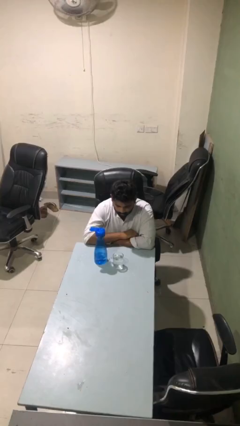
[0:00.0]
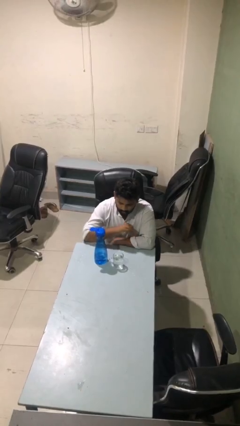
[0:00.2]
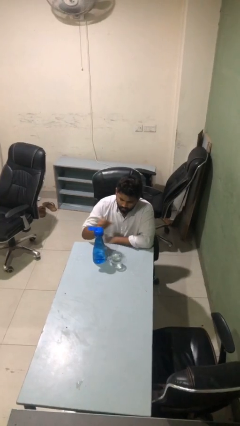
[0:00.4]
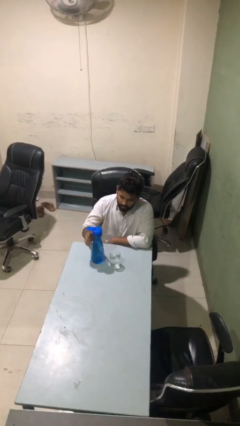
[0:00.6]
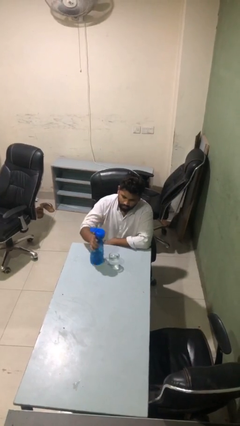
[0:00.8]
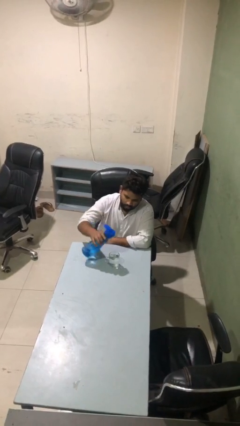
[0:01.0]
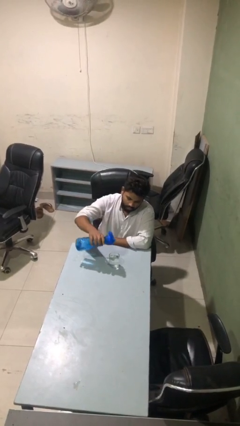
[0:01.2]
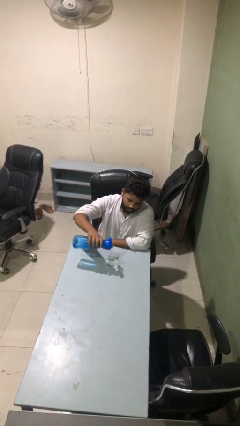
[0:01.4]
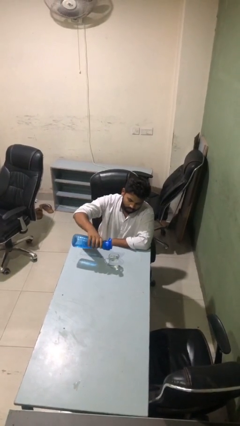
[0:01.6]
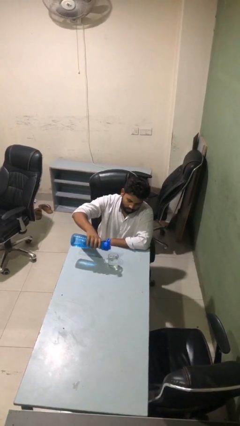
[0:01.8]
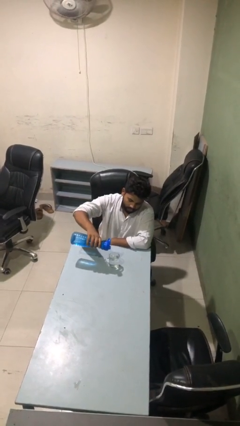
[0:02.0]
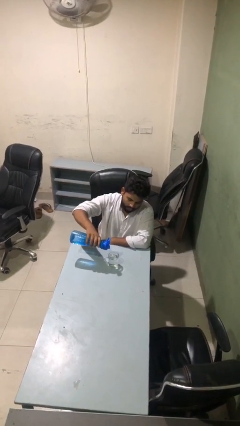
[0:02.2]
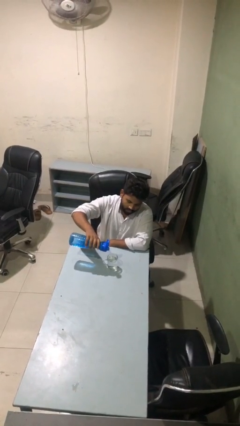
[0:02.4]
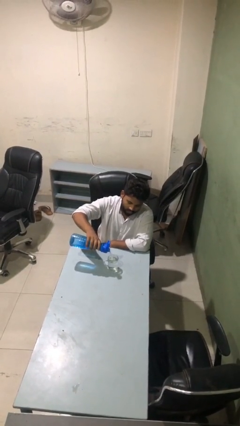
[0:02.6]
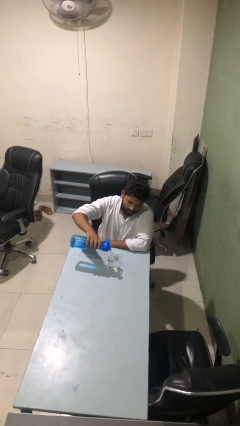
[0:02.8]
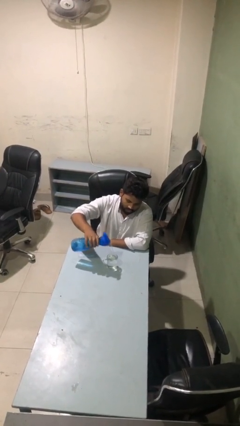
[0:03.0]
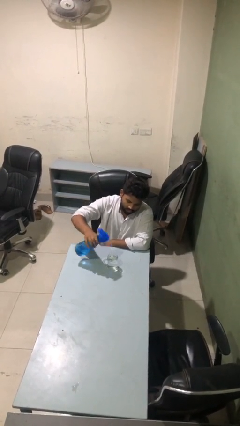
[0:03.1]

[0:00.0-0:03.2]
person pours liquid into cup

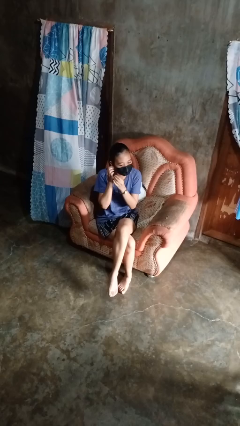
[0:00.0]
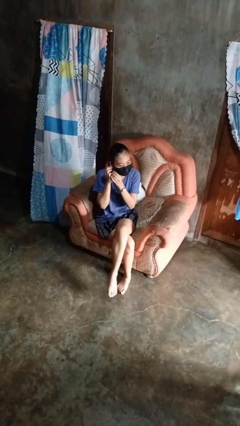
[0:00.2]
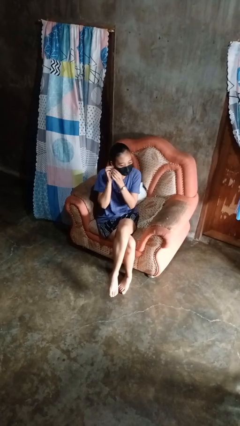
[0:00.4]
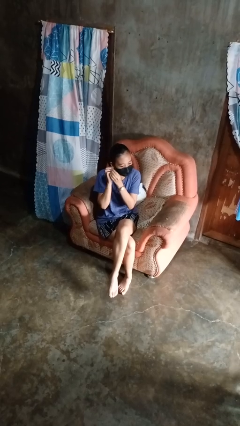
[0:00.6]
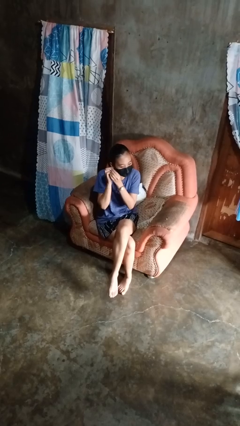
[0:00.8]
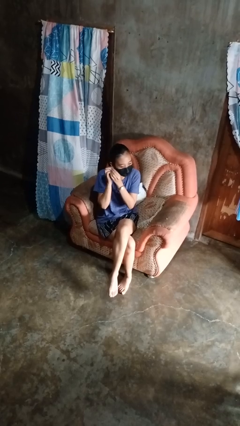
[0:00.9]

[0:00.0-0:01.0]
person puts on earrings

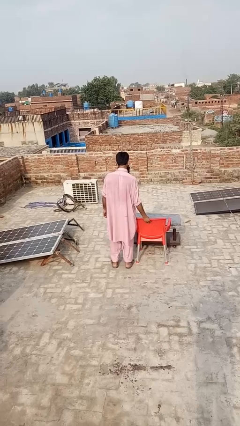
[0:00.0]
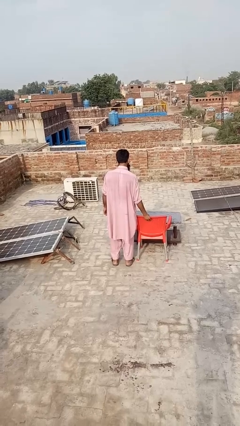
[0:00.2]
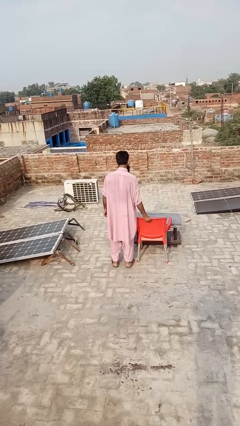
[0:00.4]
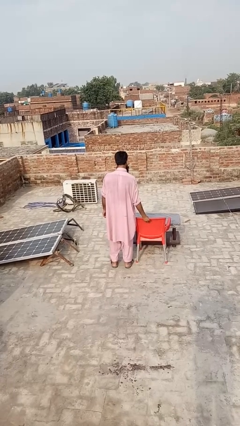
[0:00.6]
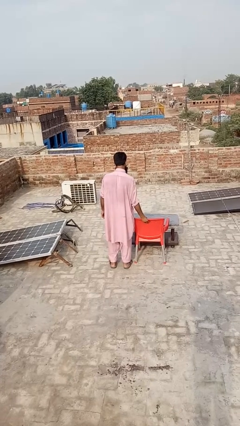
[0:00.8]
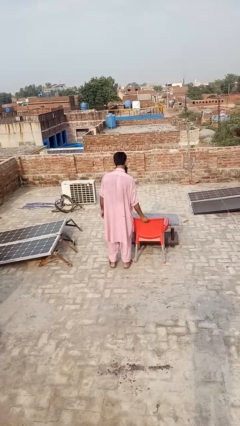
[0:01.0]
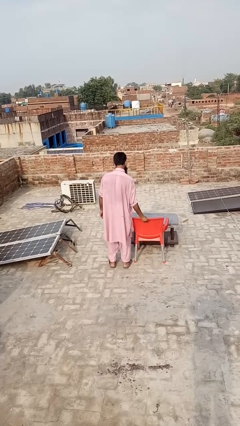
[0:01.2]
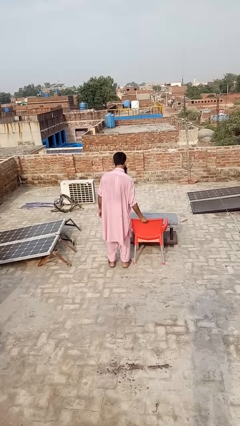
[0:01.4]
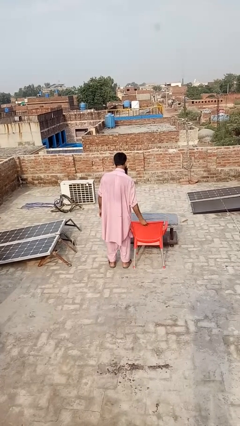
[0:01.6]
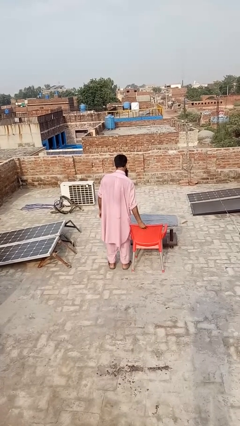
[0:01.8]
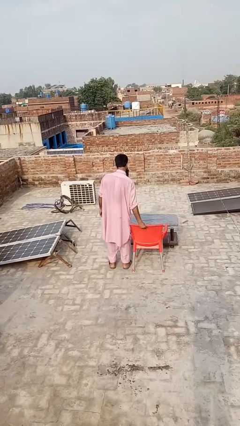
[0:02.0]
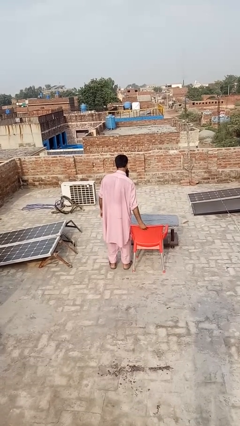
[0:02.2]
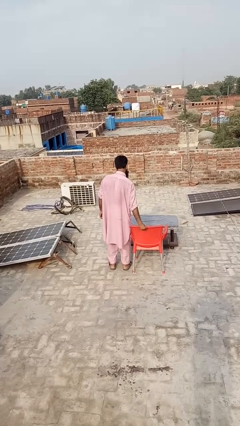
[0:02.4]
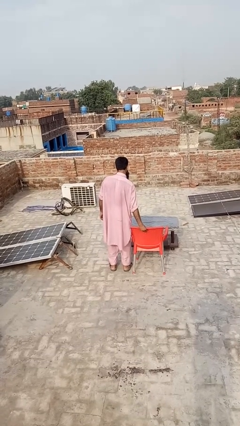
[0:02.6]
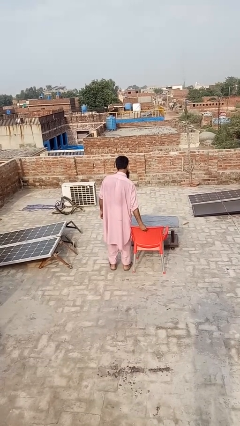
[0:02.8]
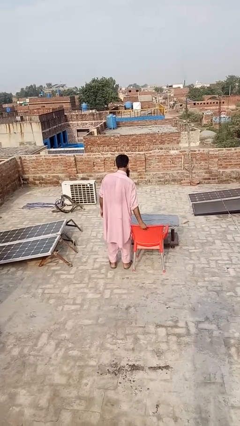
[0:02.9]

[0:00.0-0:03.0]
person pulls out chair

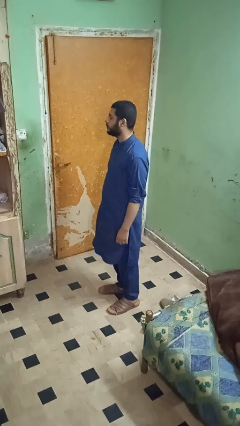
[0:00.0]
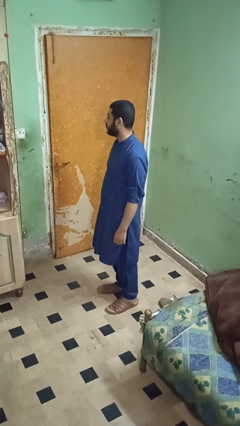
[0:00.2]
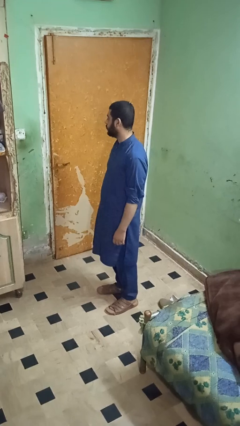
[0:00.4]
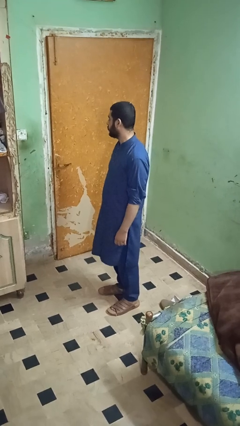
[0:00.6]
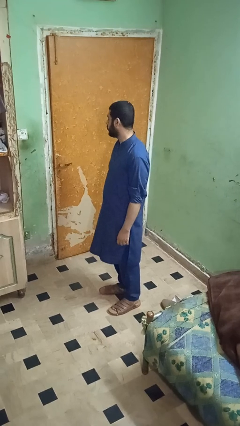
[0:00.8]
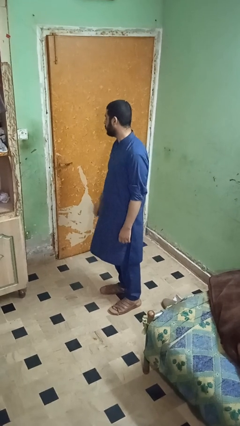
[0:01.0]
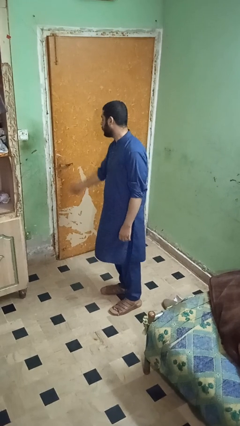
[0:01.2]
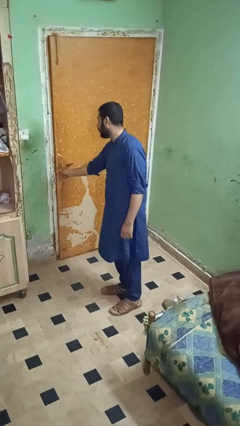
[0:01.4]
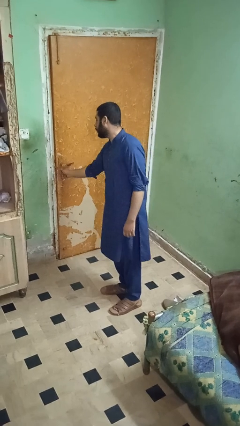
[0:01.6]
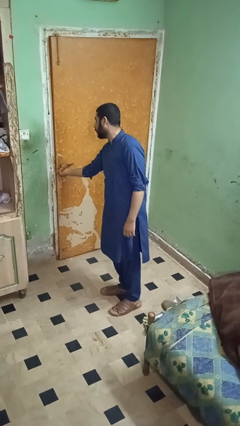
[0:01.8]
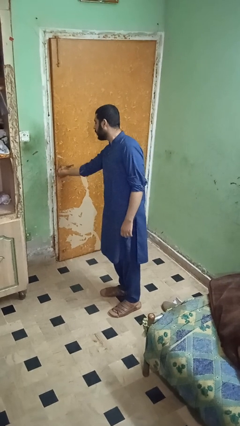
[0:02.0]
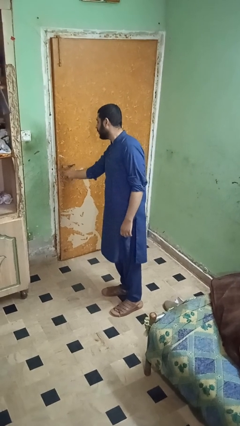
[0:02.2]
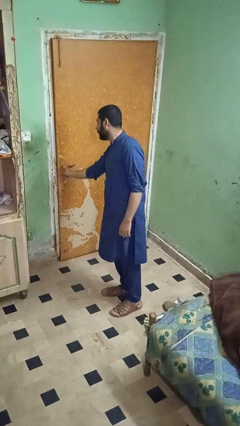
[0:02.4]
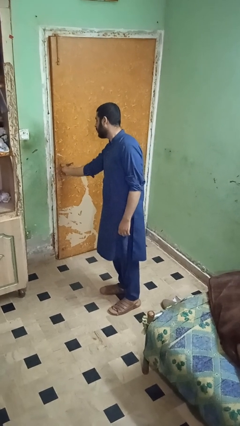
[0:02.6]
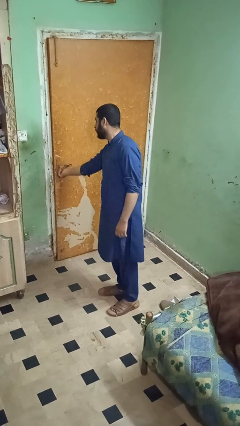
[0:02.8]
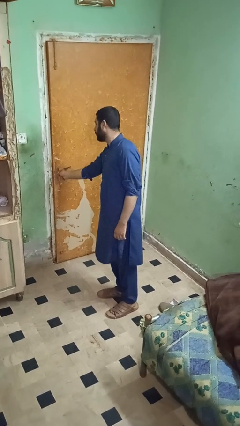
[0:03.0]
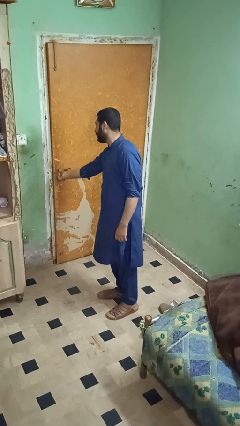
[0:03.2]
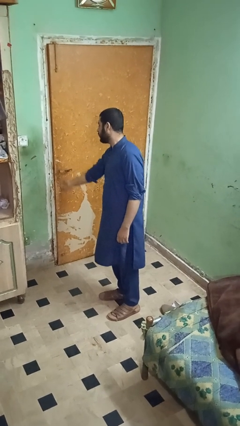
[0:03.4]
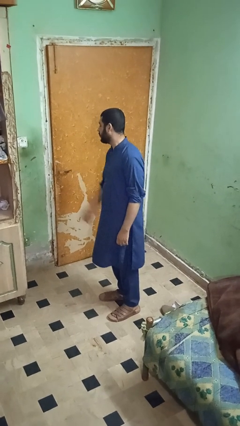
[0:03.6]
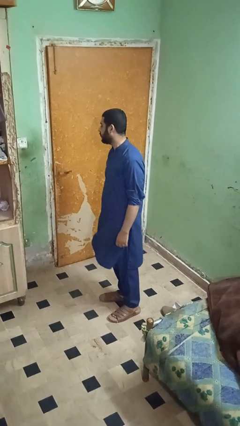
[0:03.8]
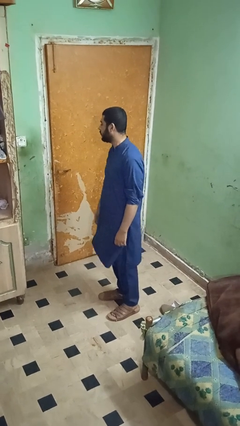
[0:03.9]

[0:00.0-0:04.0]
person unlocks door with keys

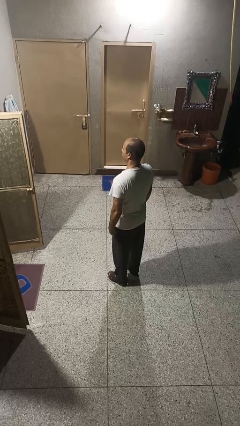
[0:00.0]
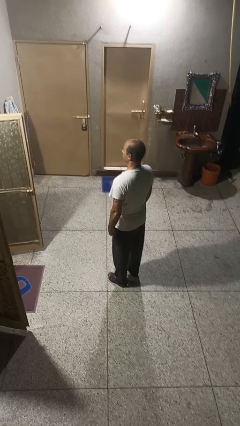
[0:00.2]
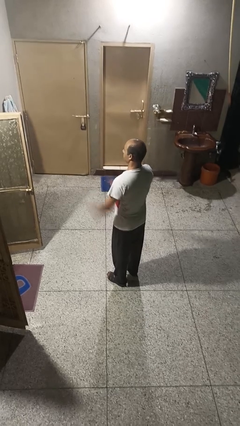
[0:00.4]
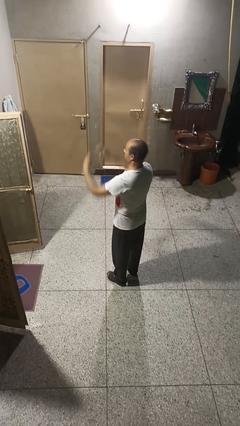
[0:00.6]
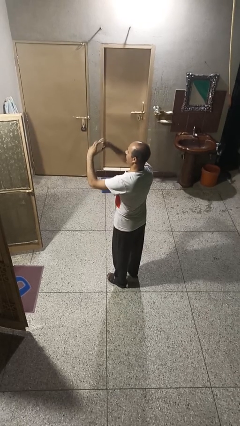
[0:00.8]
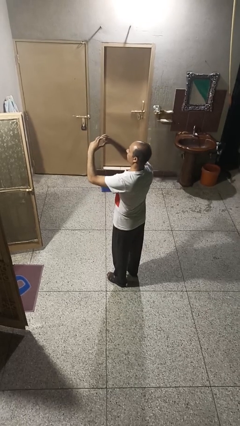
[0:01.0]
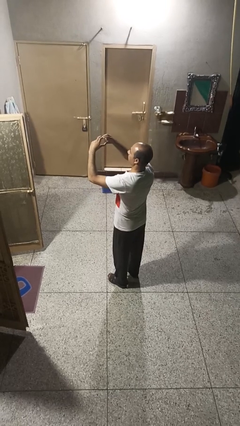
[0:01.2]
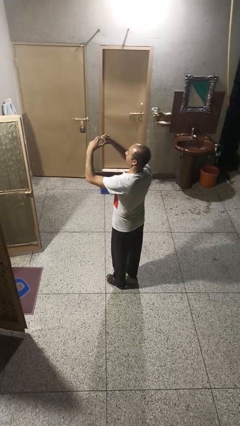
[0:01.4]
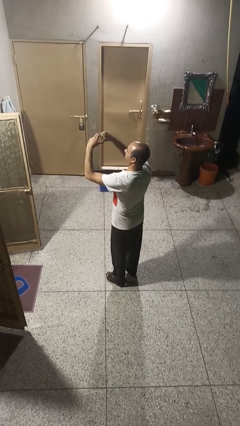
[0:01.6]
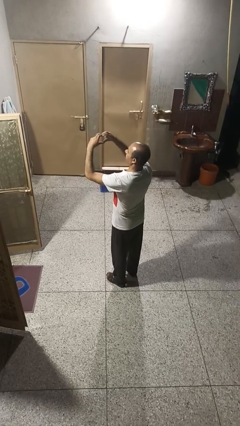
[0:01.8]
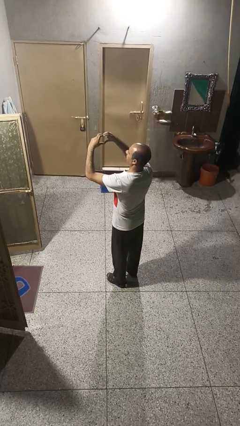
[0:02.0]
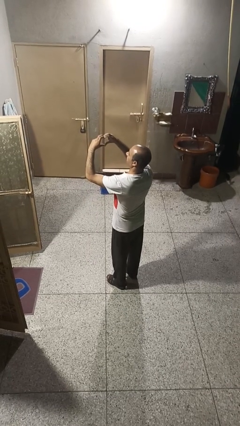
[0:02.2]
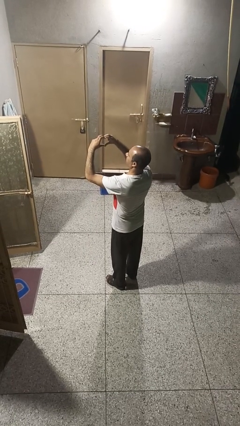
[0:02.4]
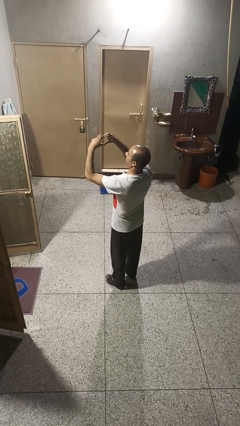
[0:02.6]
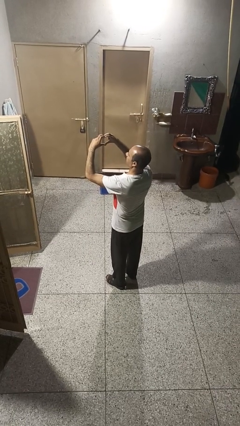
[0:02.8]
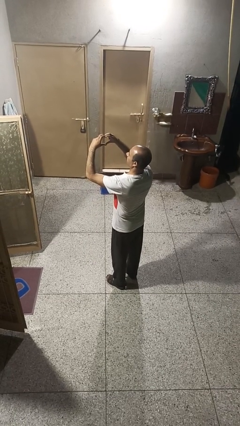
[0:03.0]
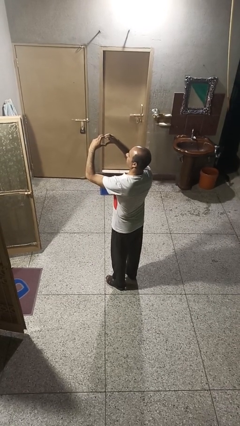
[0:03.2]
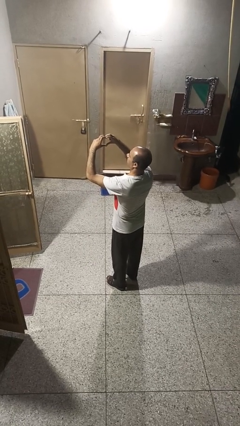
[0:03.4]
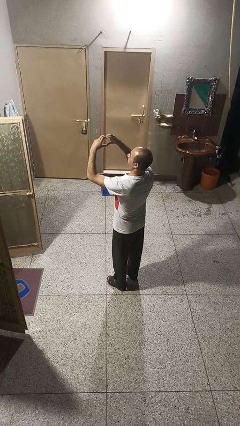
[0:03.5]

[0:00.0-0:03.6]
person gestures heart

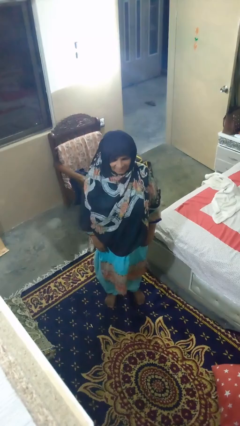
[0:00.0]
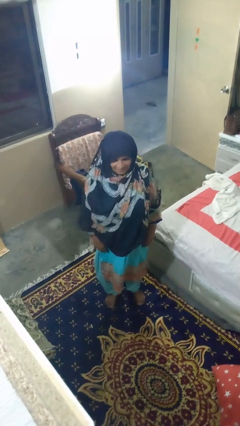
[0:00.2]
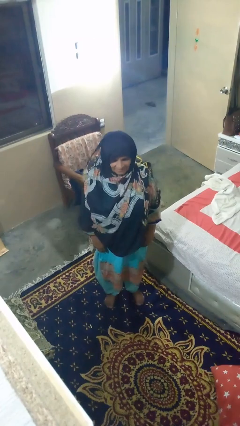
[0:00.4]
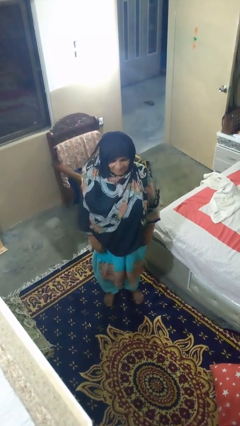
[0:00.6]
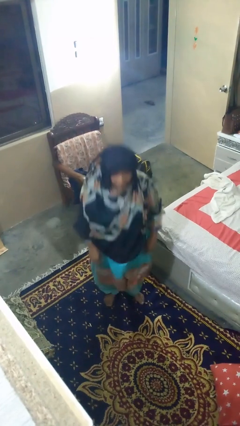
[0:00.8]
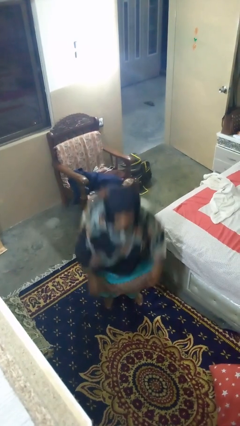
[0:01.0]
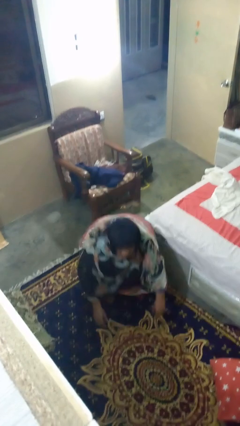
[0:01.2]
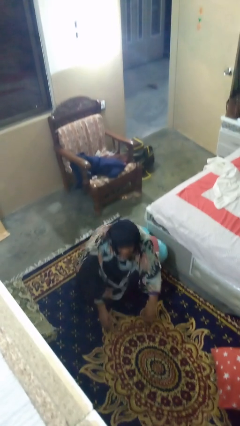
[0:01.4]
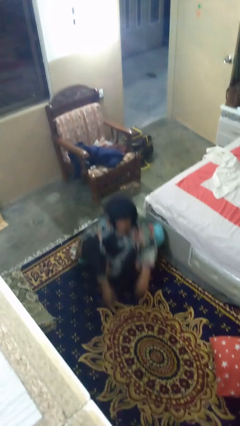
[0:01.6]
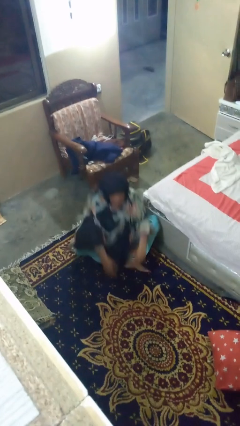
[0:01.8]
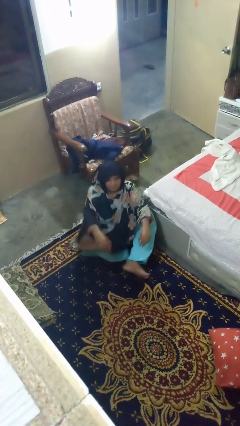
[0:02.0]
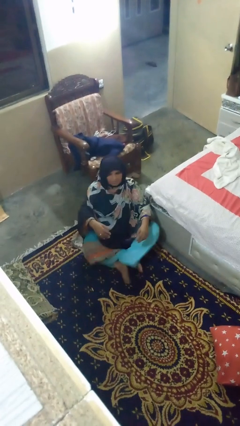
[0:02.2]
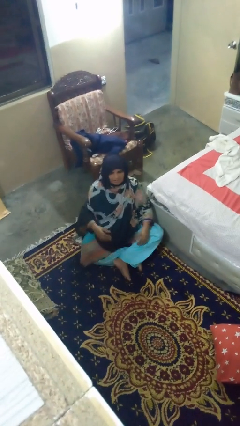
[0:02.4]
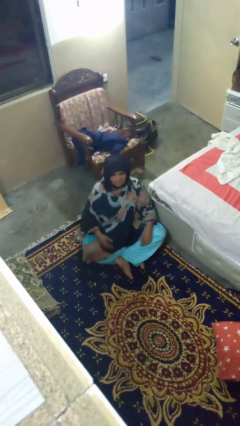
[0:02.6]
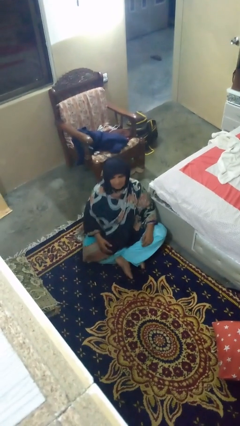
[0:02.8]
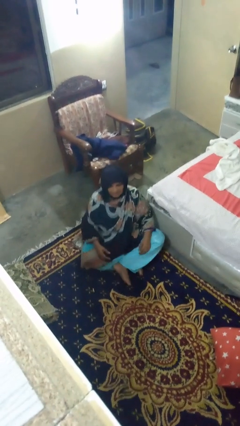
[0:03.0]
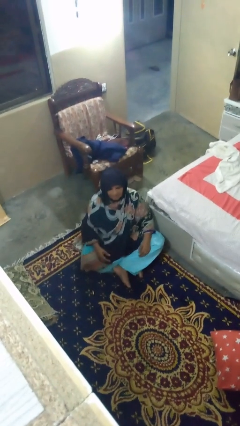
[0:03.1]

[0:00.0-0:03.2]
person sits crisscross
